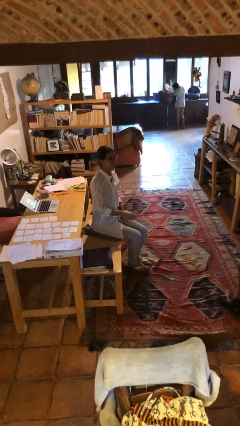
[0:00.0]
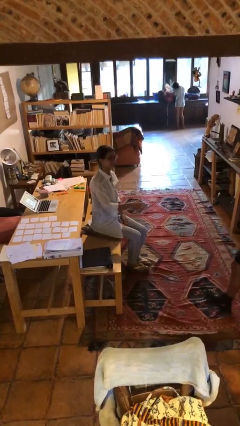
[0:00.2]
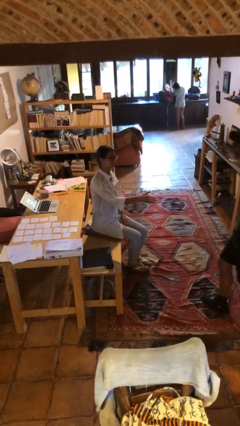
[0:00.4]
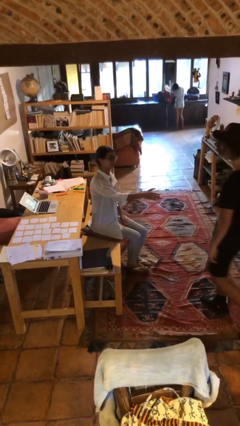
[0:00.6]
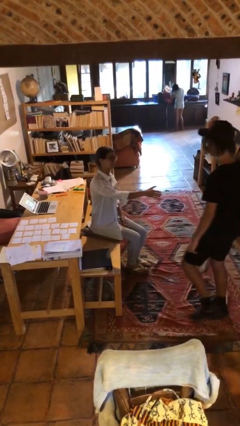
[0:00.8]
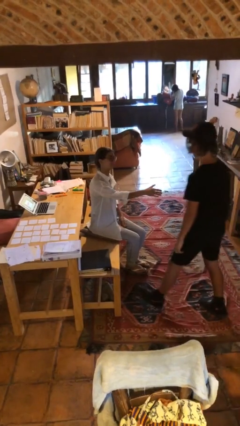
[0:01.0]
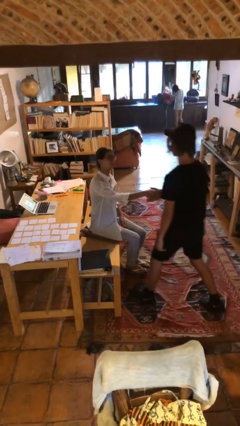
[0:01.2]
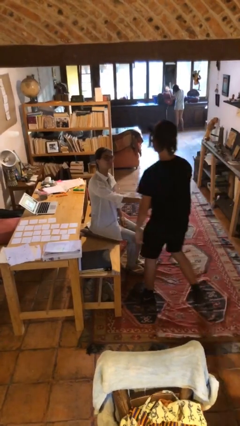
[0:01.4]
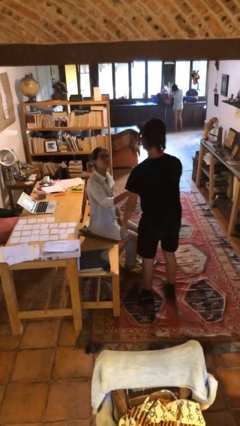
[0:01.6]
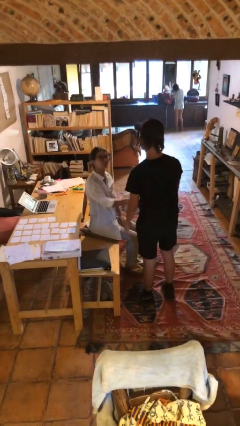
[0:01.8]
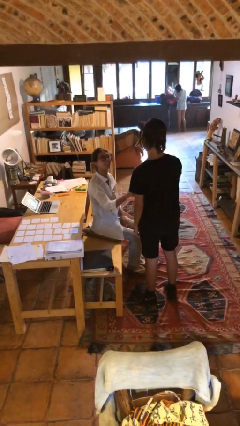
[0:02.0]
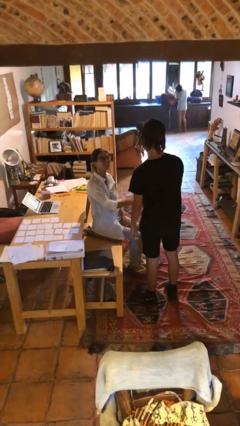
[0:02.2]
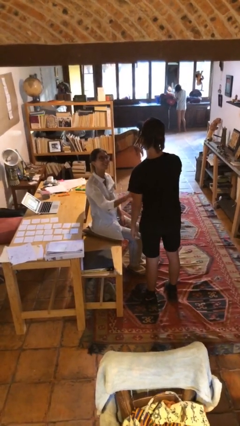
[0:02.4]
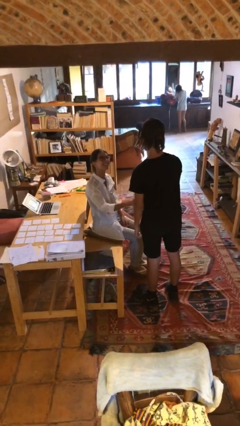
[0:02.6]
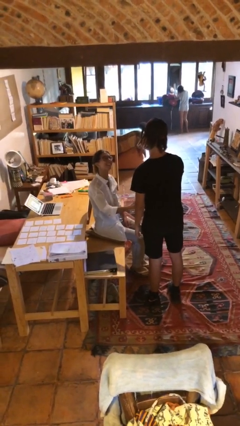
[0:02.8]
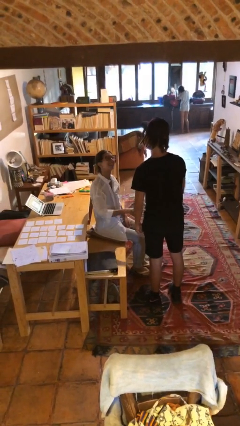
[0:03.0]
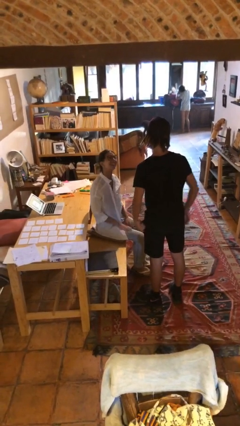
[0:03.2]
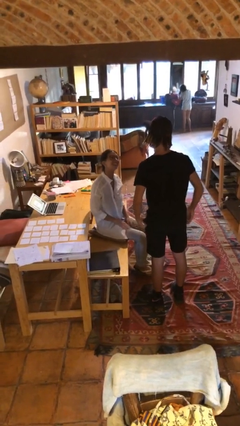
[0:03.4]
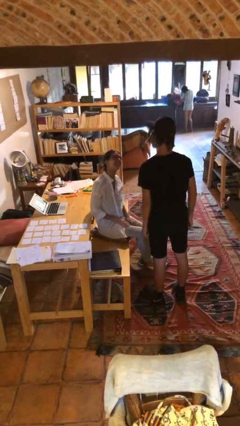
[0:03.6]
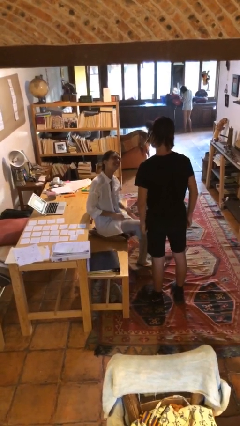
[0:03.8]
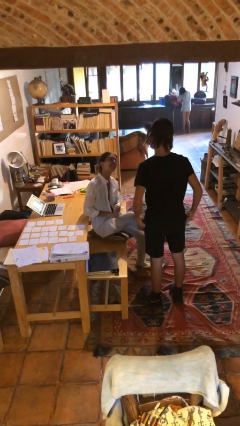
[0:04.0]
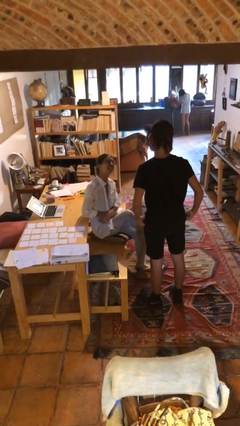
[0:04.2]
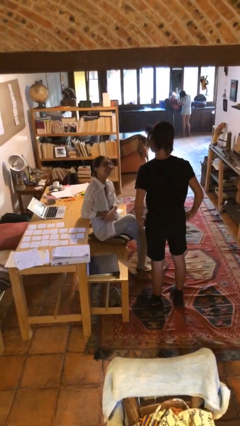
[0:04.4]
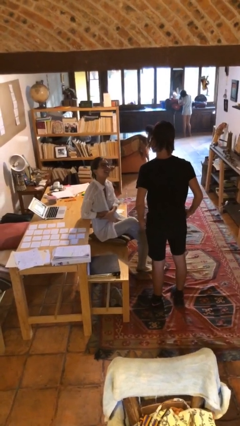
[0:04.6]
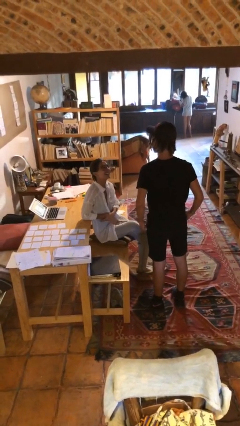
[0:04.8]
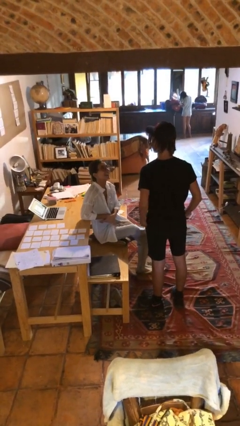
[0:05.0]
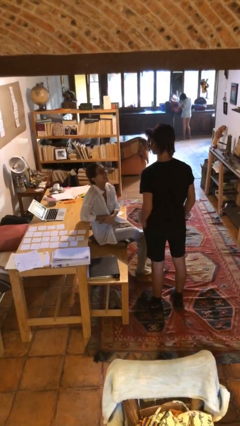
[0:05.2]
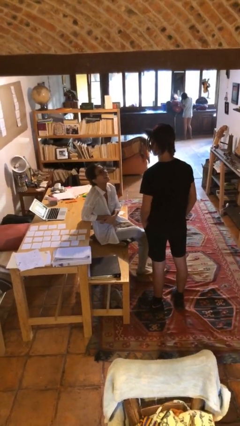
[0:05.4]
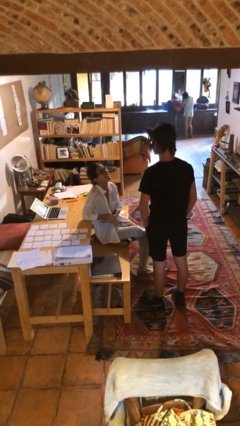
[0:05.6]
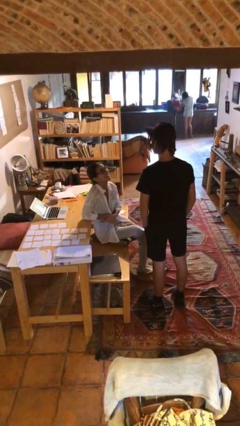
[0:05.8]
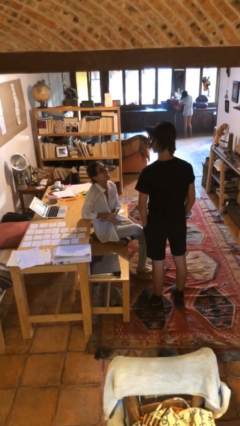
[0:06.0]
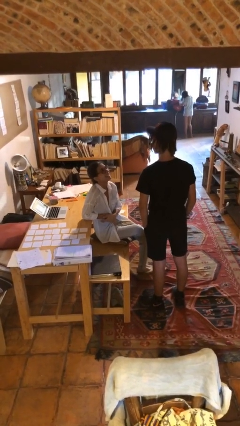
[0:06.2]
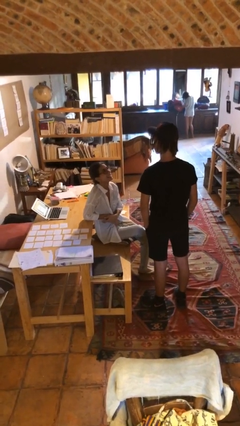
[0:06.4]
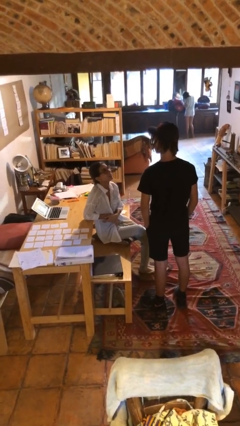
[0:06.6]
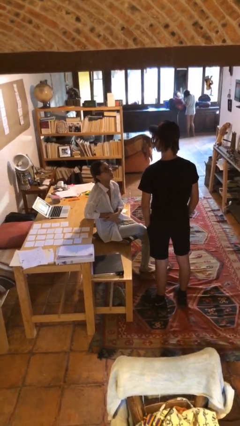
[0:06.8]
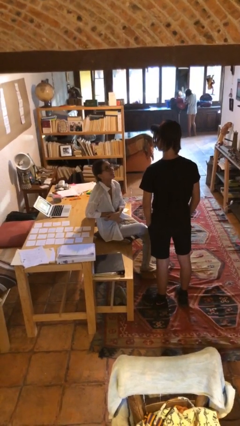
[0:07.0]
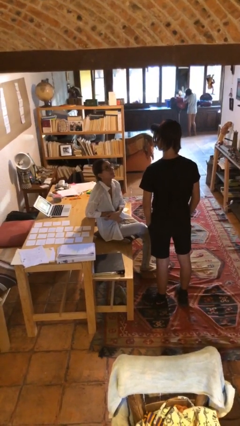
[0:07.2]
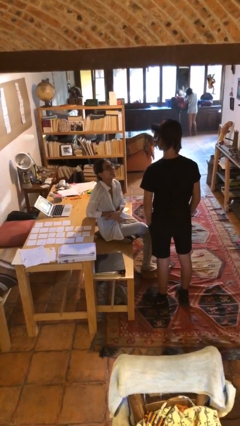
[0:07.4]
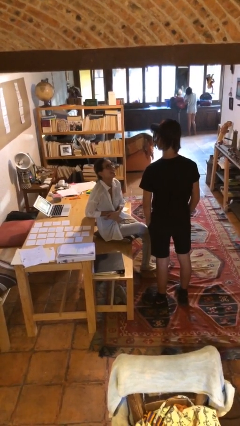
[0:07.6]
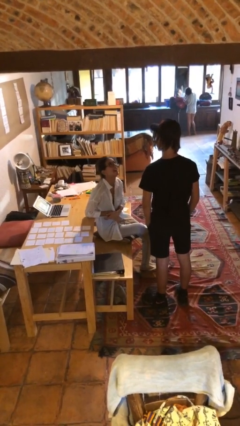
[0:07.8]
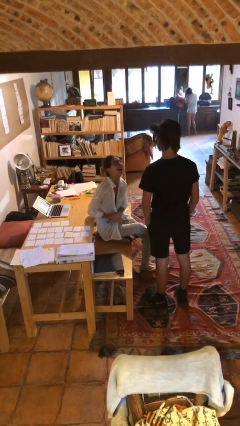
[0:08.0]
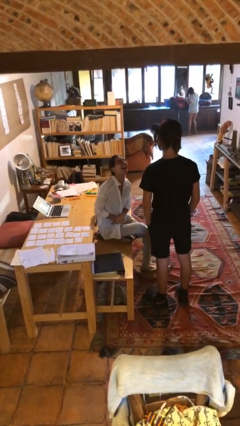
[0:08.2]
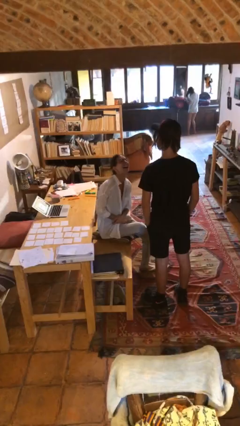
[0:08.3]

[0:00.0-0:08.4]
person shakes hand

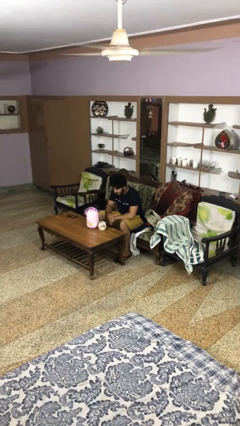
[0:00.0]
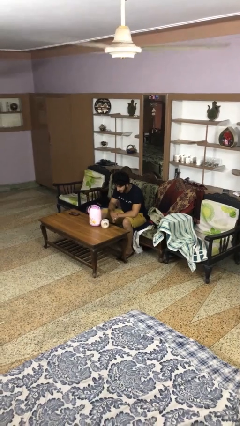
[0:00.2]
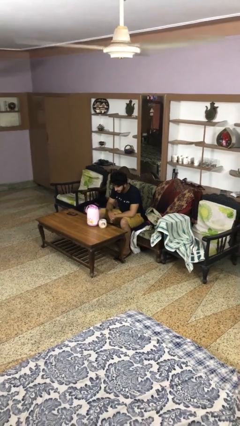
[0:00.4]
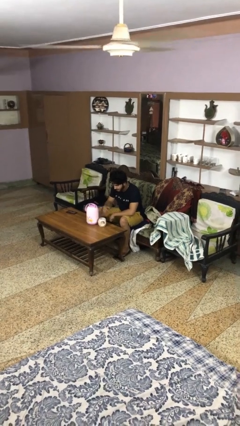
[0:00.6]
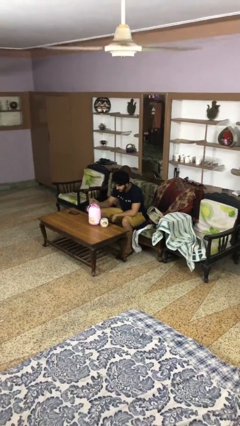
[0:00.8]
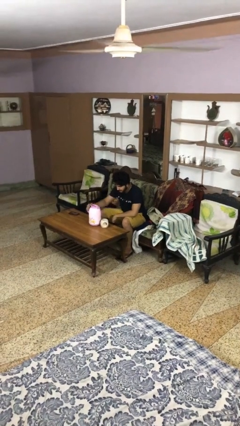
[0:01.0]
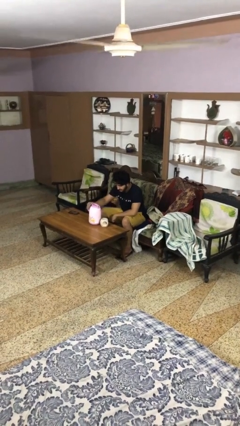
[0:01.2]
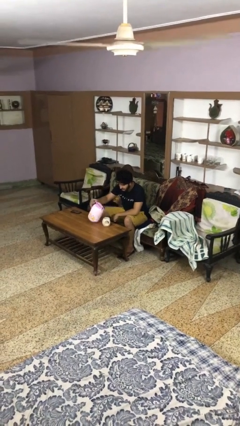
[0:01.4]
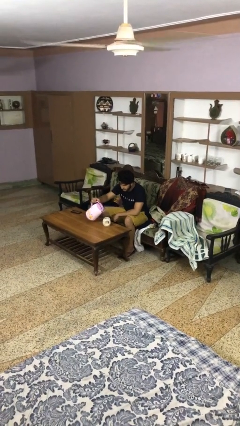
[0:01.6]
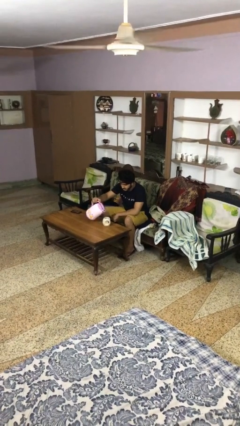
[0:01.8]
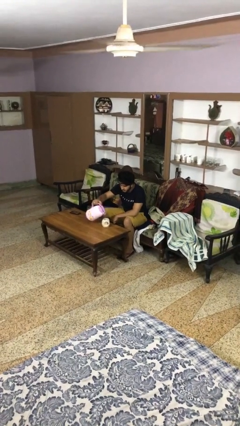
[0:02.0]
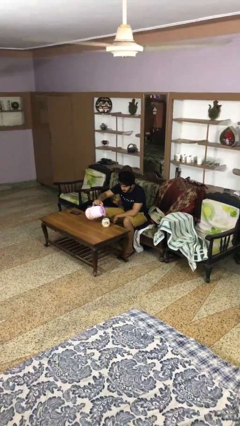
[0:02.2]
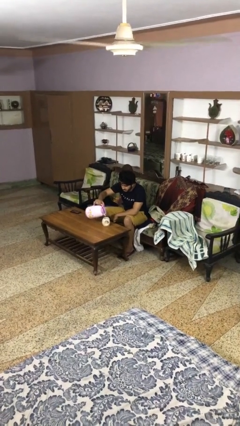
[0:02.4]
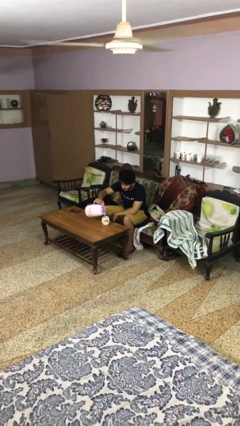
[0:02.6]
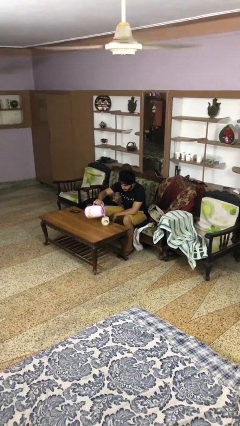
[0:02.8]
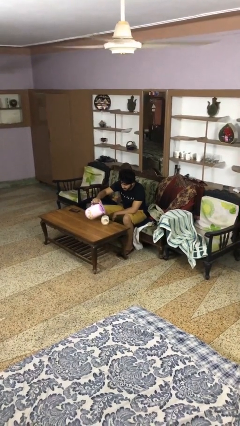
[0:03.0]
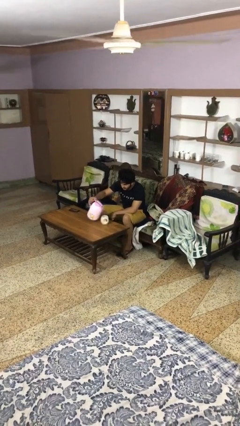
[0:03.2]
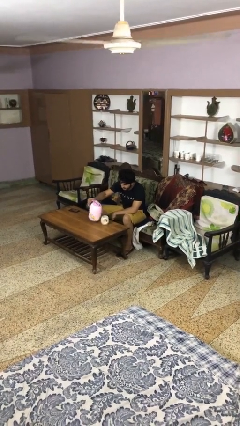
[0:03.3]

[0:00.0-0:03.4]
person pours coffee into mug

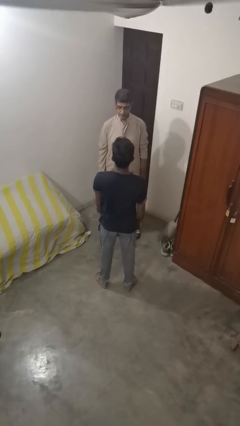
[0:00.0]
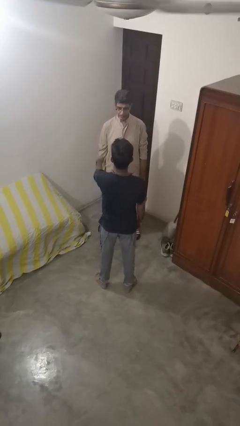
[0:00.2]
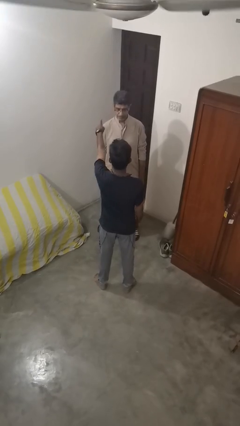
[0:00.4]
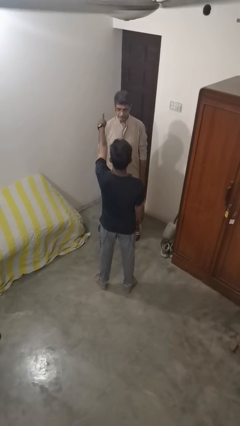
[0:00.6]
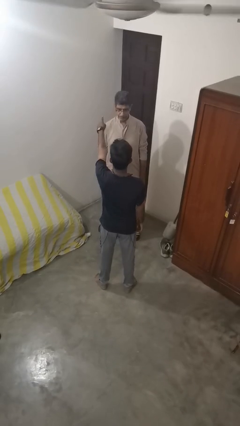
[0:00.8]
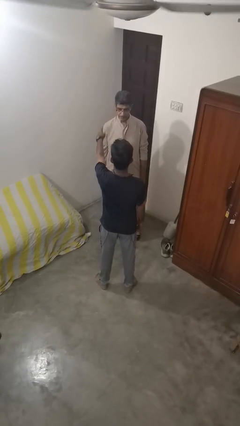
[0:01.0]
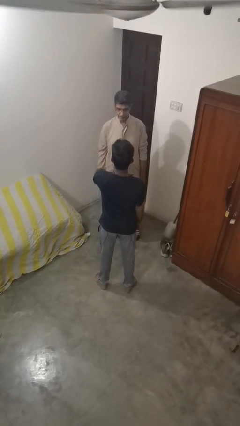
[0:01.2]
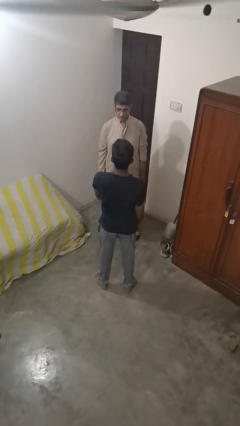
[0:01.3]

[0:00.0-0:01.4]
person shoves person

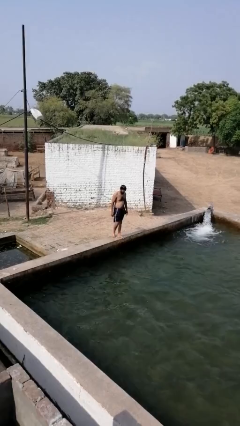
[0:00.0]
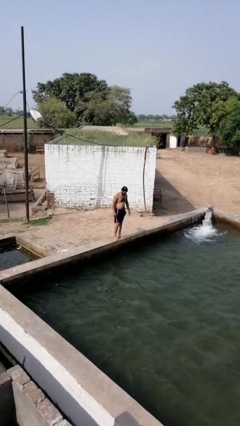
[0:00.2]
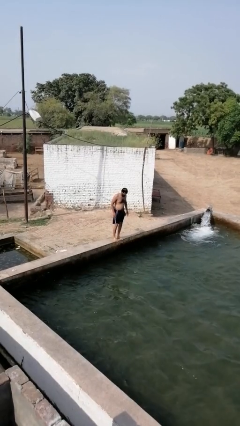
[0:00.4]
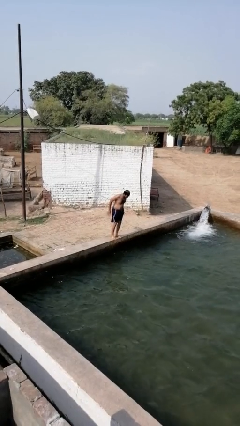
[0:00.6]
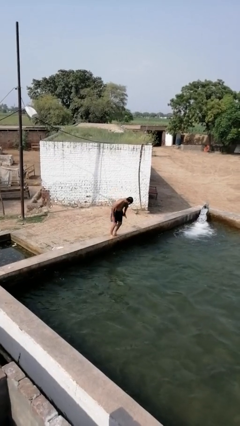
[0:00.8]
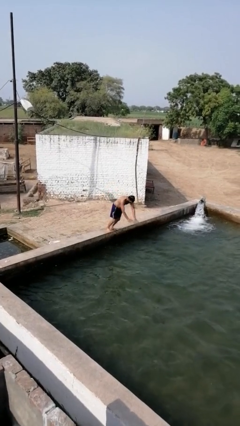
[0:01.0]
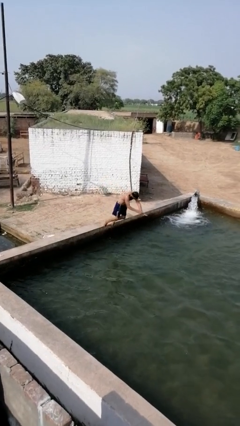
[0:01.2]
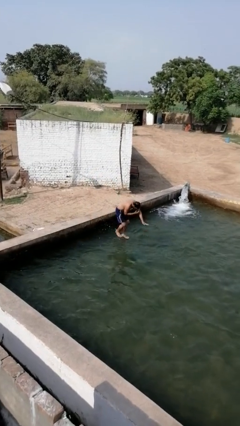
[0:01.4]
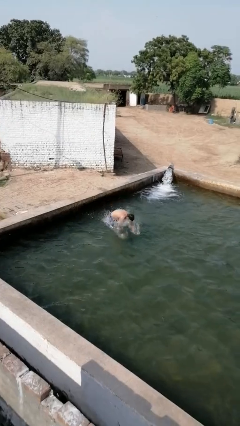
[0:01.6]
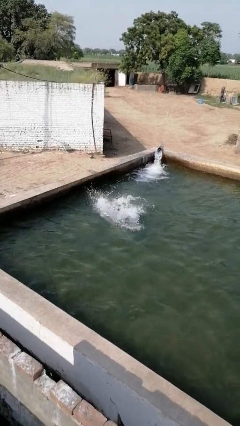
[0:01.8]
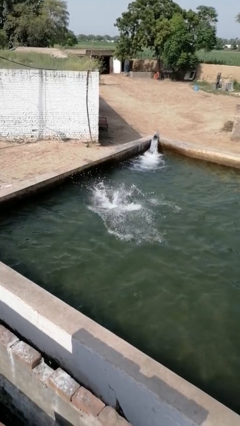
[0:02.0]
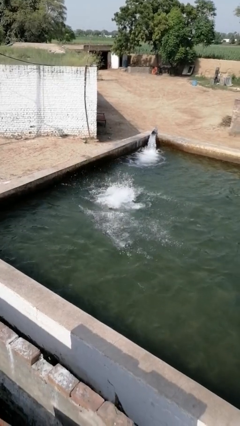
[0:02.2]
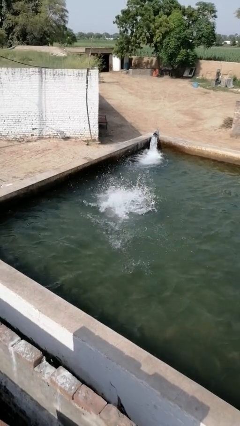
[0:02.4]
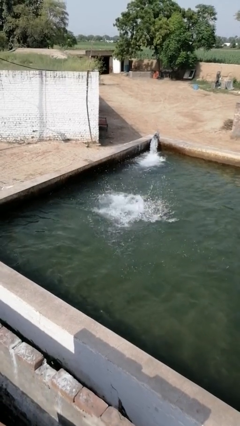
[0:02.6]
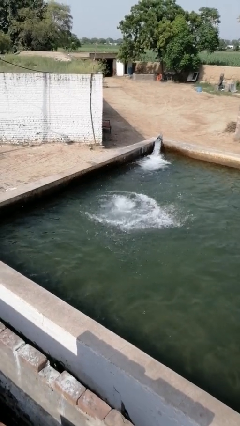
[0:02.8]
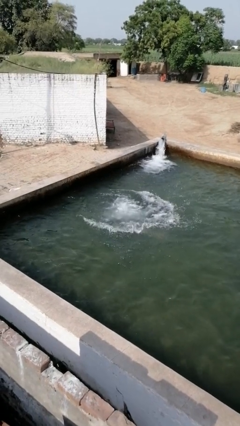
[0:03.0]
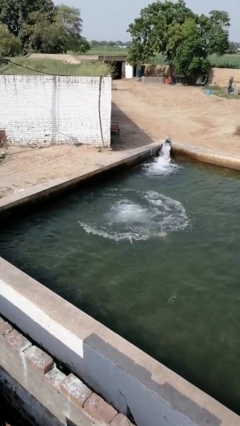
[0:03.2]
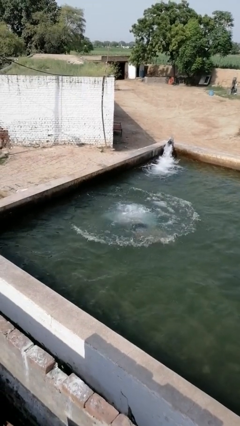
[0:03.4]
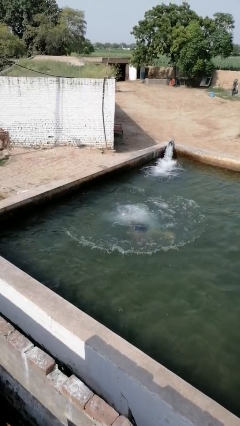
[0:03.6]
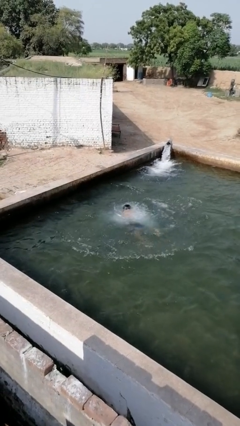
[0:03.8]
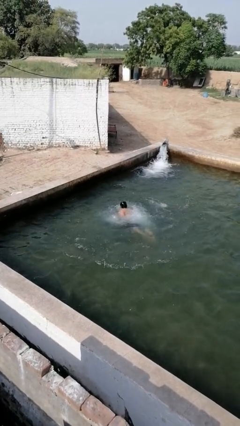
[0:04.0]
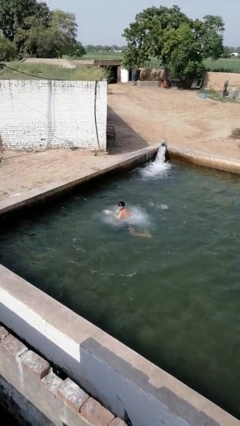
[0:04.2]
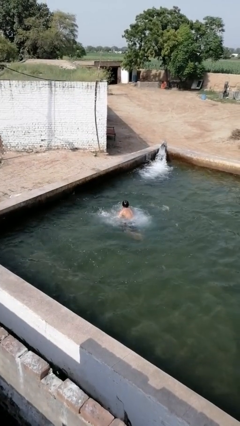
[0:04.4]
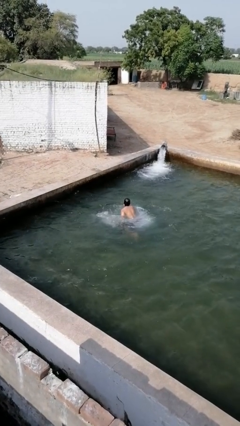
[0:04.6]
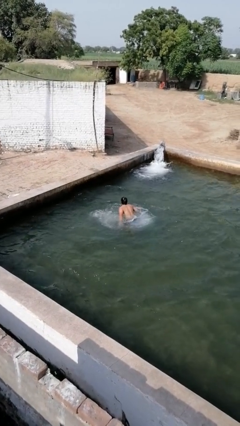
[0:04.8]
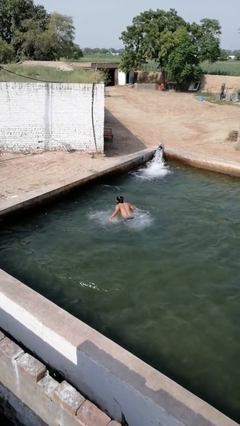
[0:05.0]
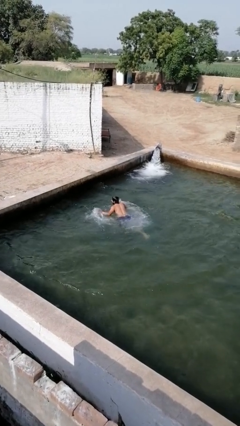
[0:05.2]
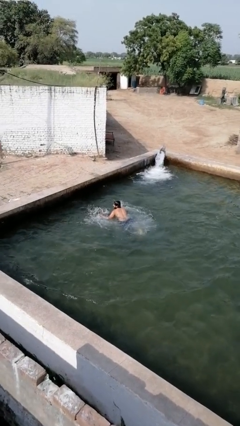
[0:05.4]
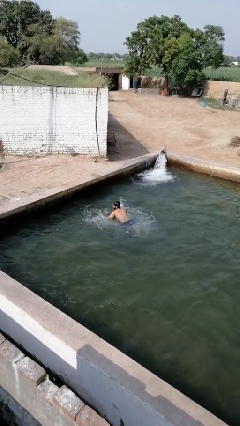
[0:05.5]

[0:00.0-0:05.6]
person jumps into pool
